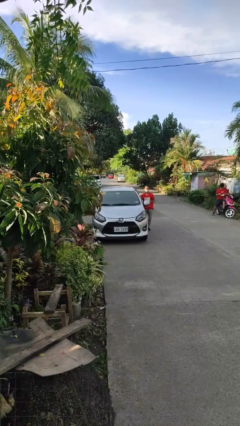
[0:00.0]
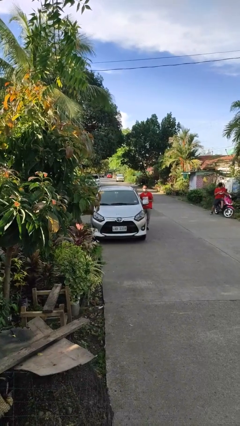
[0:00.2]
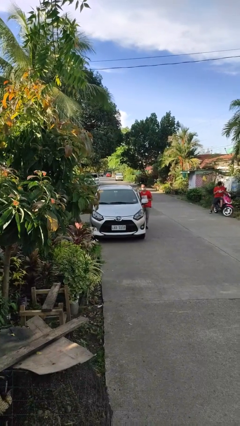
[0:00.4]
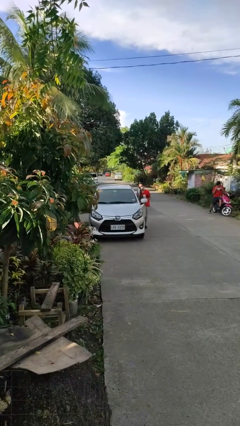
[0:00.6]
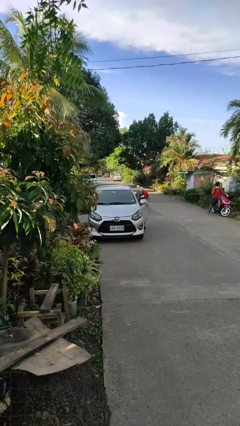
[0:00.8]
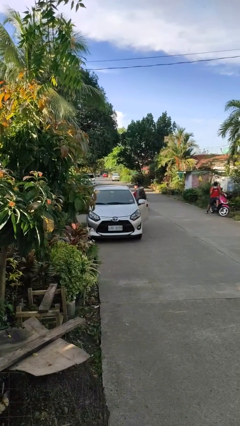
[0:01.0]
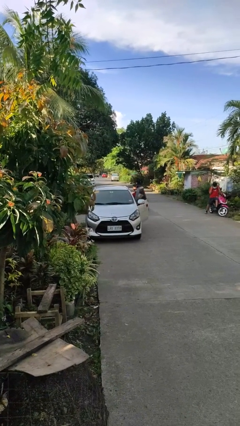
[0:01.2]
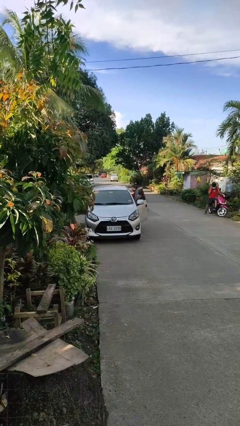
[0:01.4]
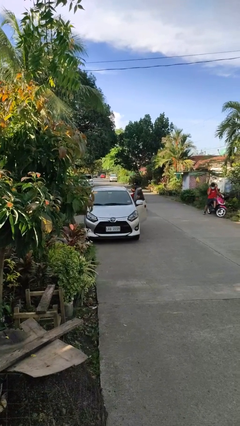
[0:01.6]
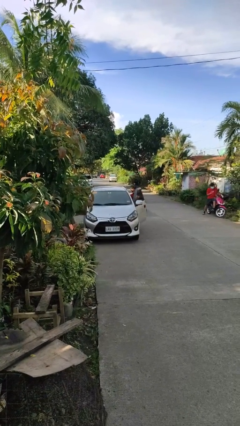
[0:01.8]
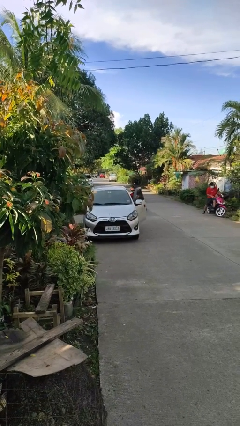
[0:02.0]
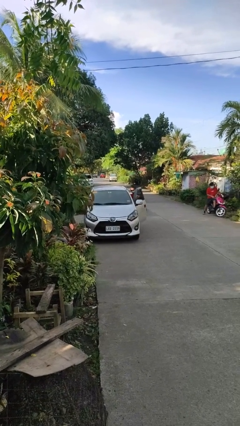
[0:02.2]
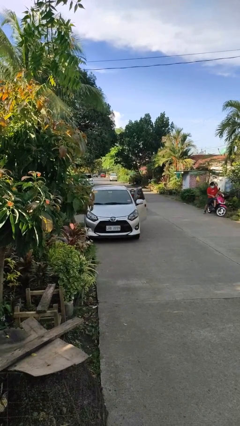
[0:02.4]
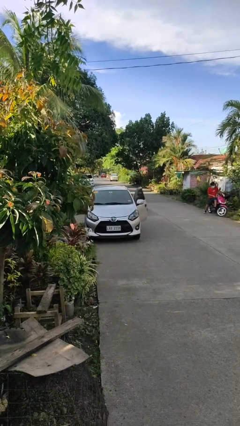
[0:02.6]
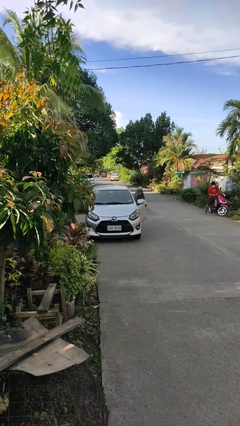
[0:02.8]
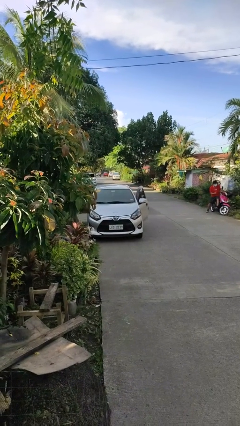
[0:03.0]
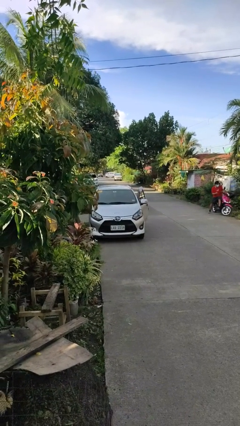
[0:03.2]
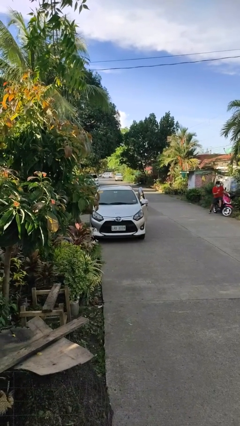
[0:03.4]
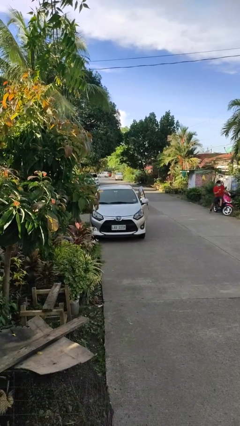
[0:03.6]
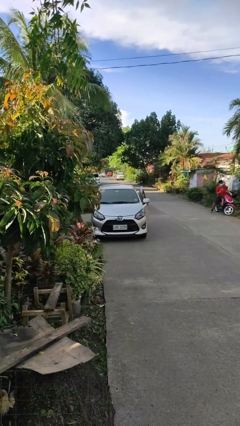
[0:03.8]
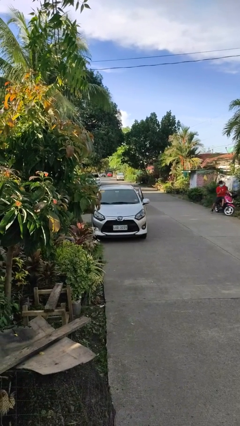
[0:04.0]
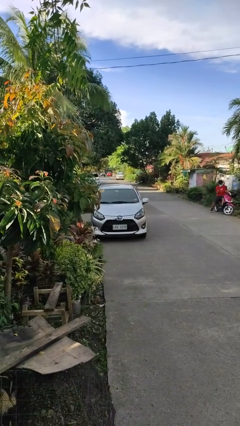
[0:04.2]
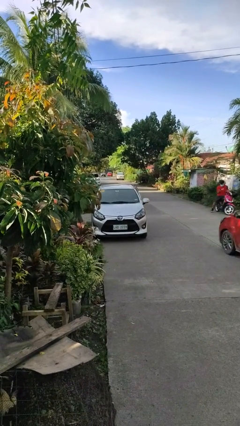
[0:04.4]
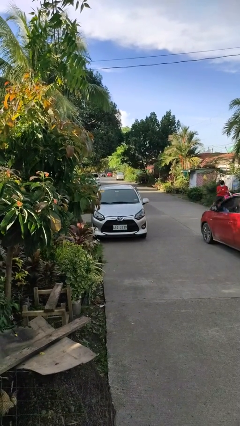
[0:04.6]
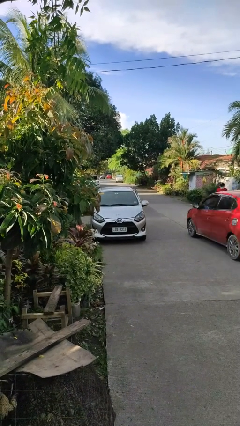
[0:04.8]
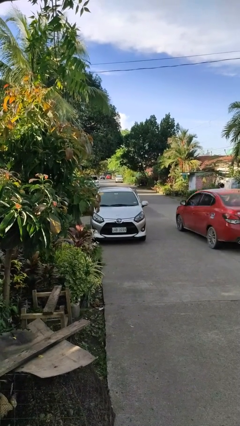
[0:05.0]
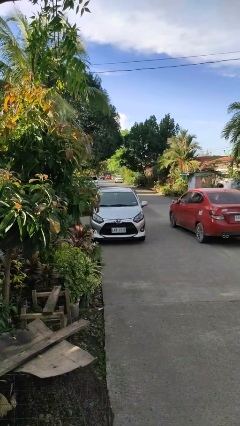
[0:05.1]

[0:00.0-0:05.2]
car picks up person

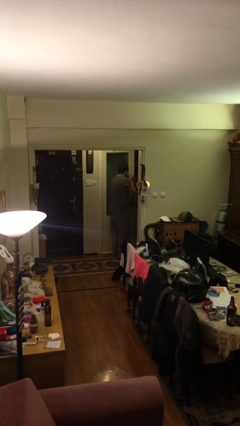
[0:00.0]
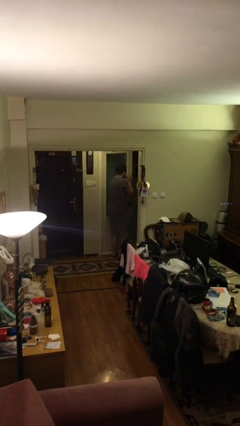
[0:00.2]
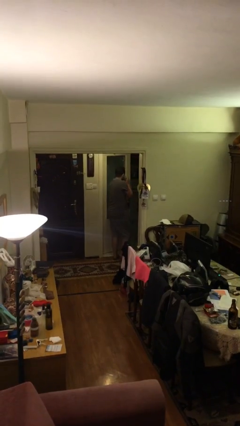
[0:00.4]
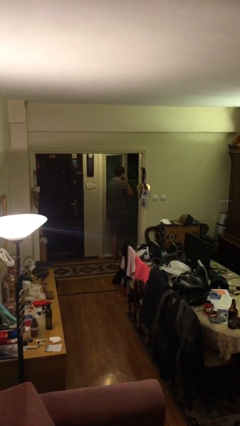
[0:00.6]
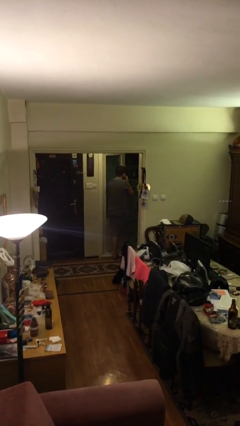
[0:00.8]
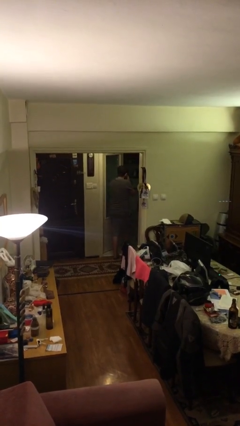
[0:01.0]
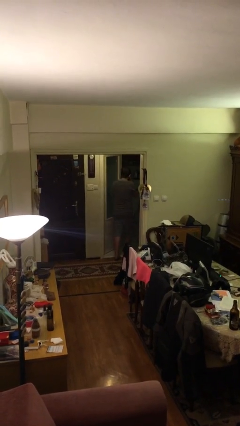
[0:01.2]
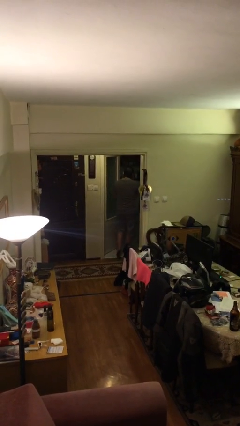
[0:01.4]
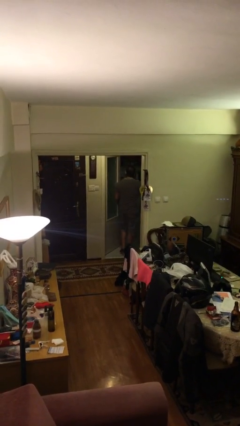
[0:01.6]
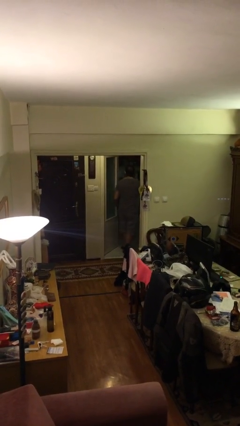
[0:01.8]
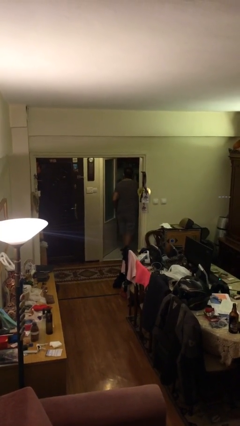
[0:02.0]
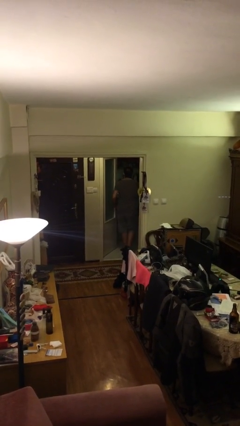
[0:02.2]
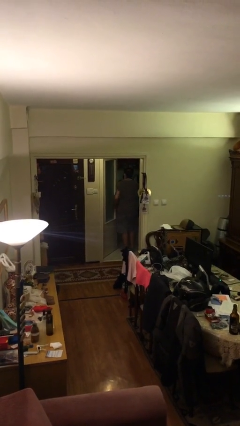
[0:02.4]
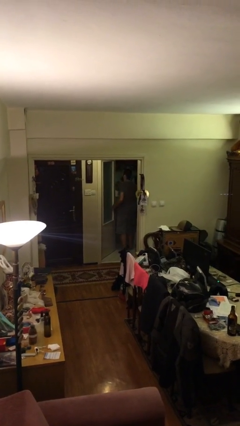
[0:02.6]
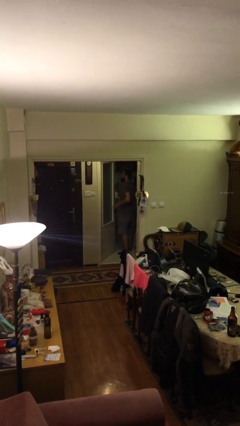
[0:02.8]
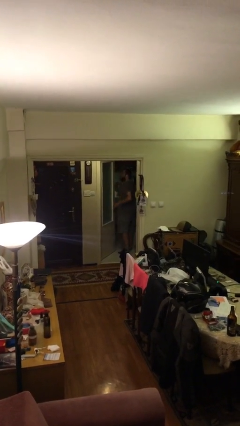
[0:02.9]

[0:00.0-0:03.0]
person exits scene through structure

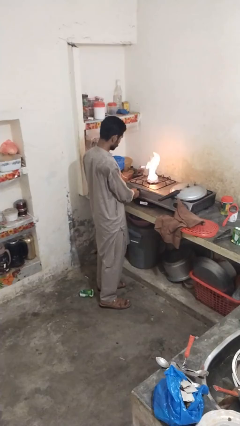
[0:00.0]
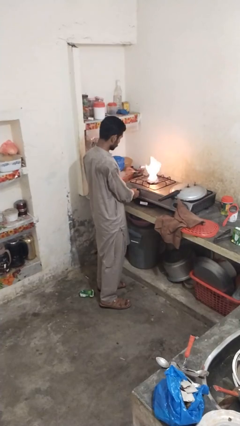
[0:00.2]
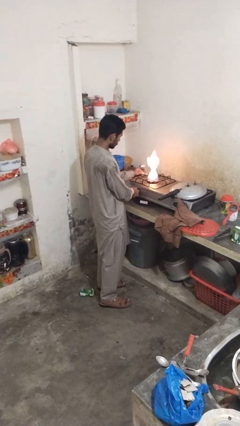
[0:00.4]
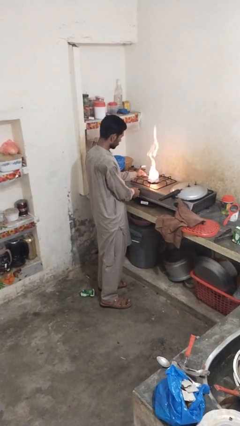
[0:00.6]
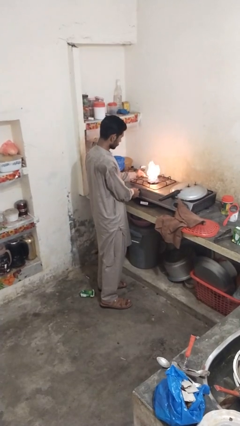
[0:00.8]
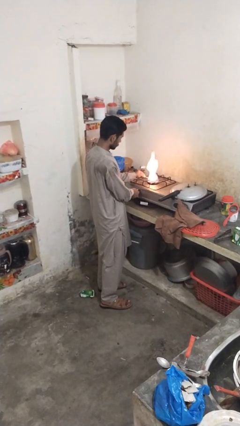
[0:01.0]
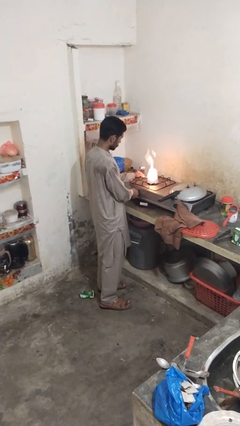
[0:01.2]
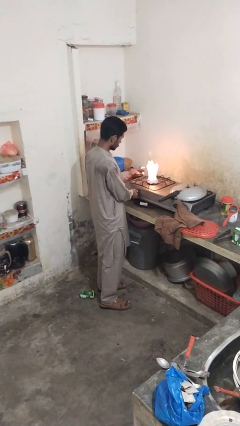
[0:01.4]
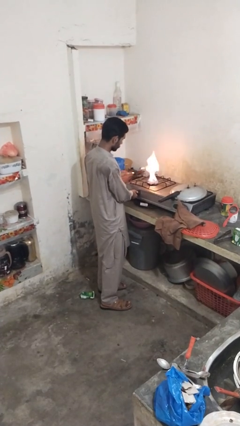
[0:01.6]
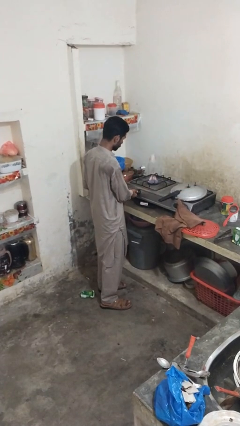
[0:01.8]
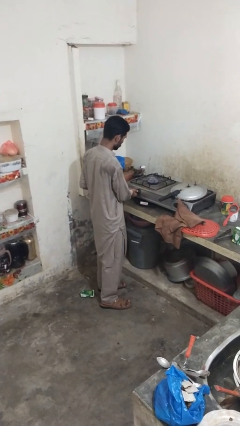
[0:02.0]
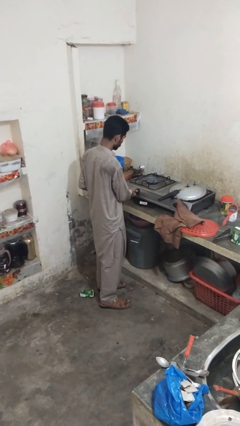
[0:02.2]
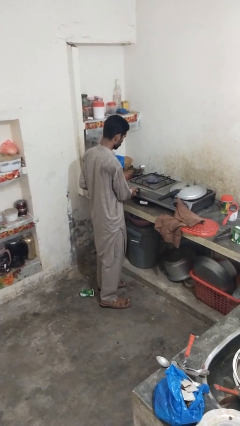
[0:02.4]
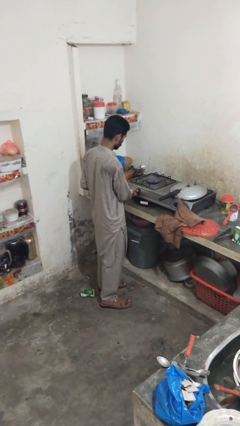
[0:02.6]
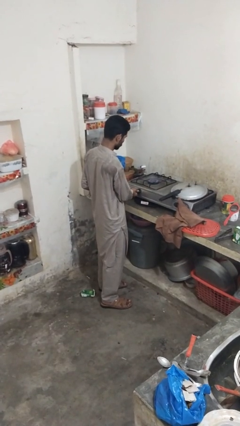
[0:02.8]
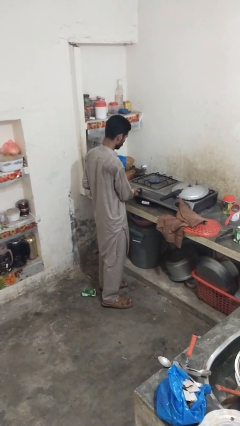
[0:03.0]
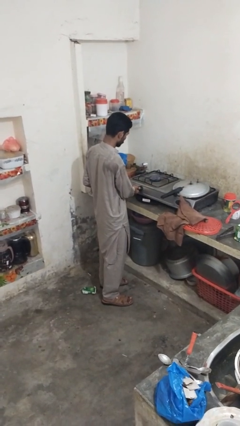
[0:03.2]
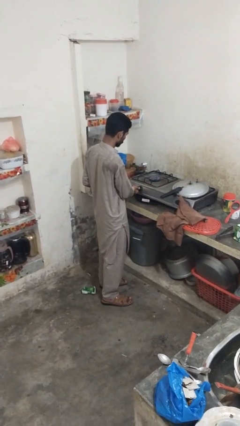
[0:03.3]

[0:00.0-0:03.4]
person turns off stovetop

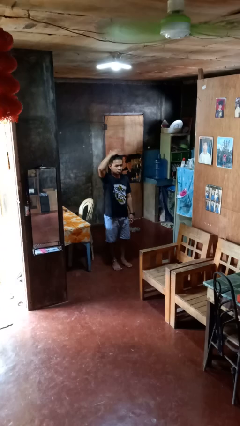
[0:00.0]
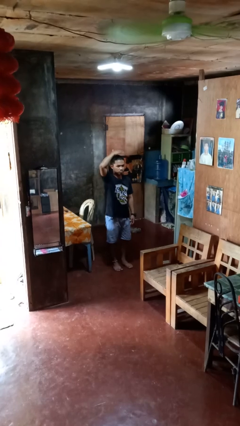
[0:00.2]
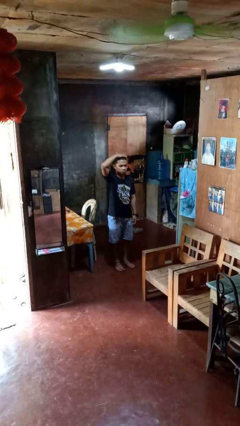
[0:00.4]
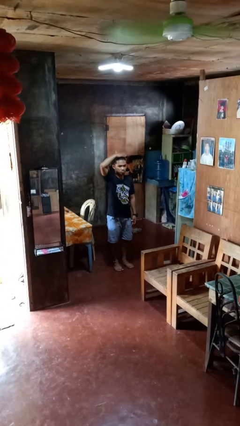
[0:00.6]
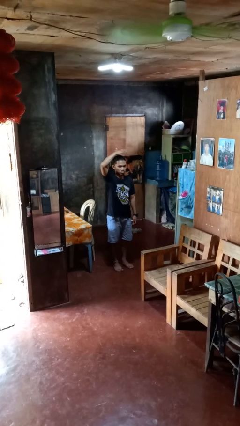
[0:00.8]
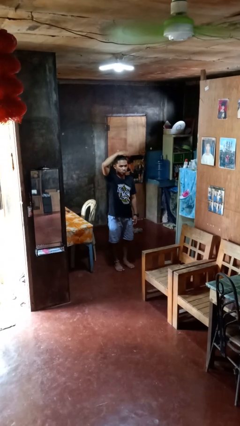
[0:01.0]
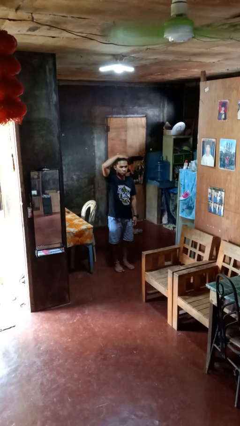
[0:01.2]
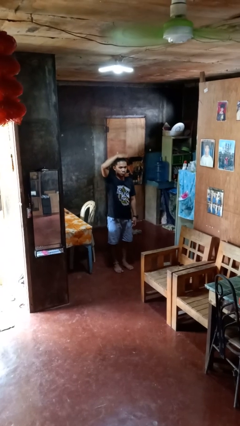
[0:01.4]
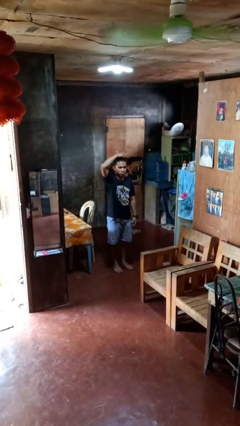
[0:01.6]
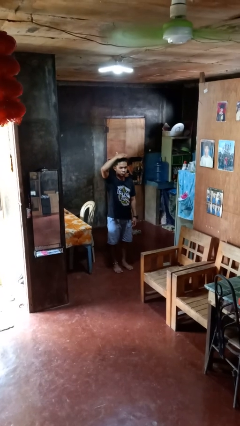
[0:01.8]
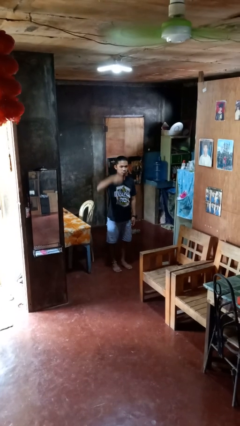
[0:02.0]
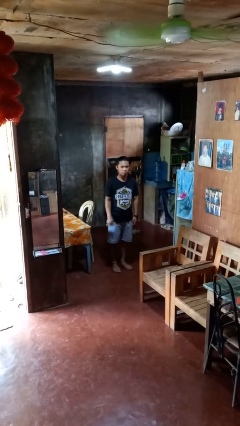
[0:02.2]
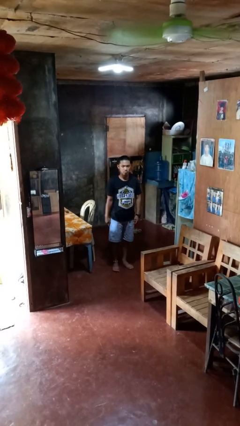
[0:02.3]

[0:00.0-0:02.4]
person pats head

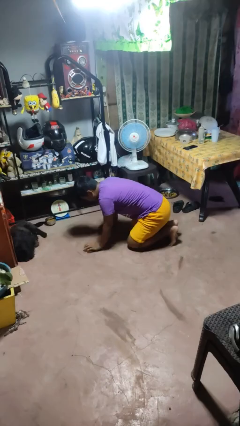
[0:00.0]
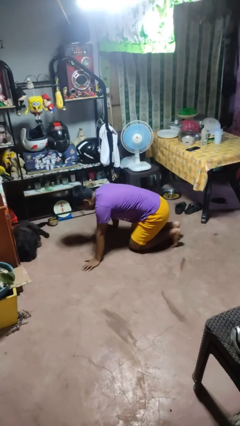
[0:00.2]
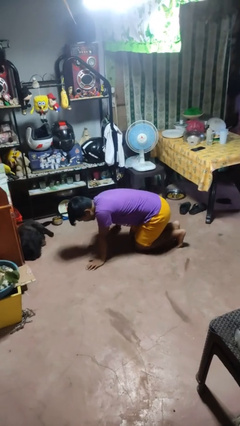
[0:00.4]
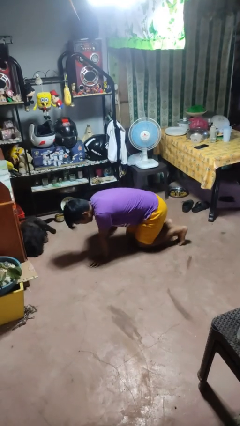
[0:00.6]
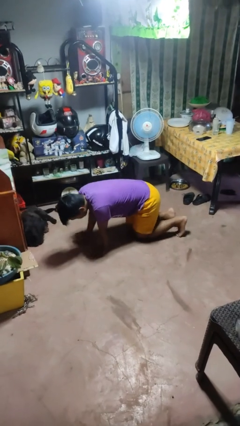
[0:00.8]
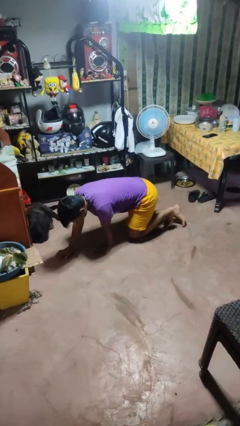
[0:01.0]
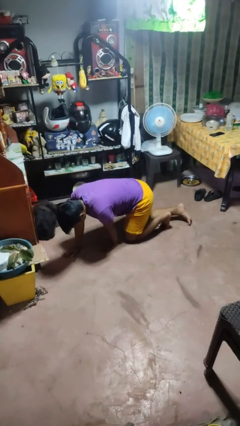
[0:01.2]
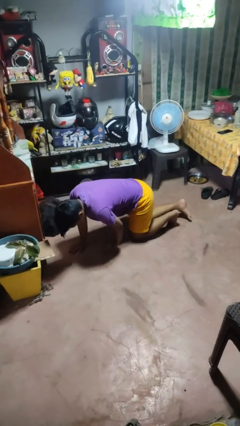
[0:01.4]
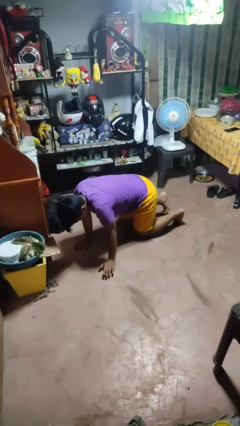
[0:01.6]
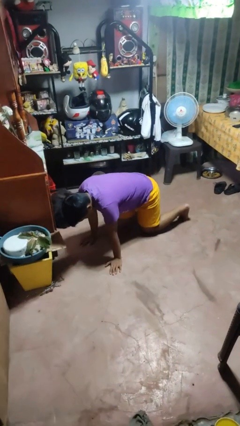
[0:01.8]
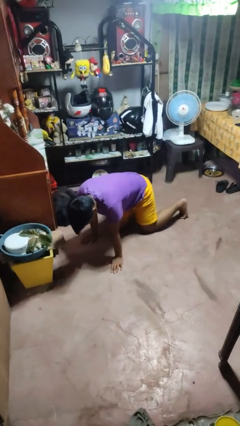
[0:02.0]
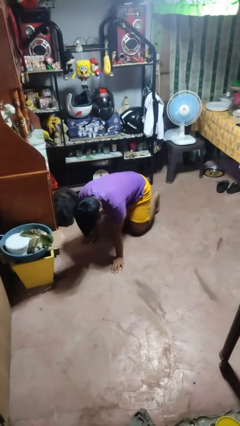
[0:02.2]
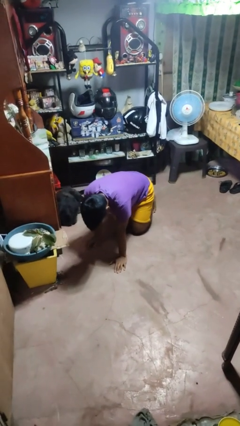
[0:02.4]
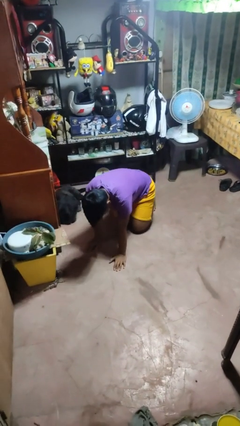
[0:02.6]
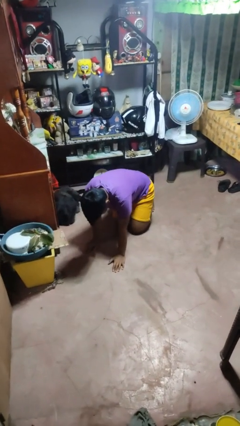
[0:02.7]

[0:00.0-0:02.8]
person crawls

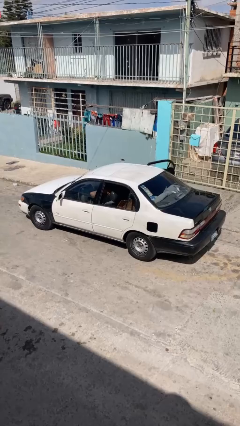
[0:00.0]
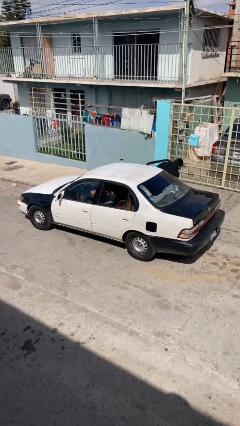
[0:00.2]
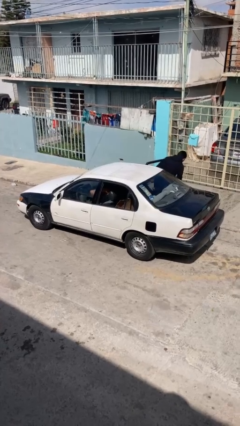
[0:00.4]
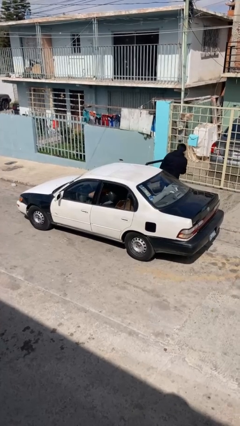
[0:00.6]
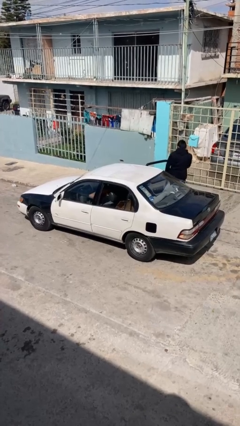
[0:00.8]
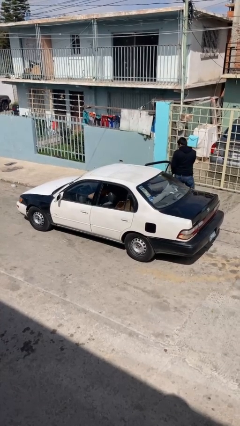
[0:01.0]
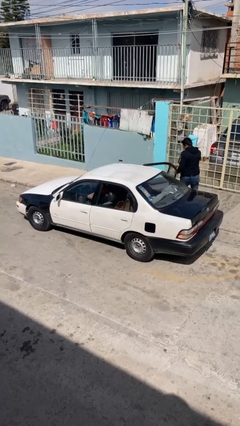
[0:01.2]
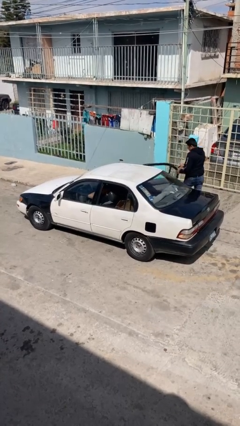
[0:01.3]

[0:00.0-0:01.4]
car drops off person
